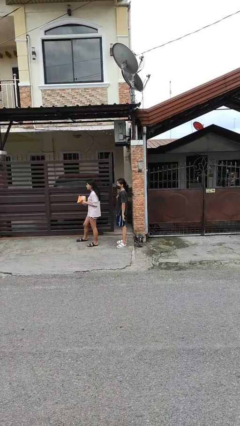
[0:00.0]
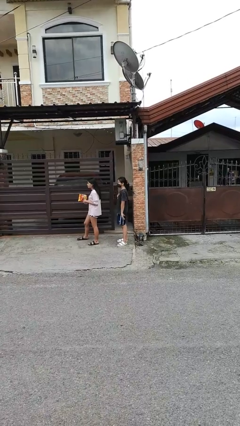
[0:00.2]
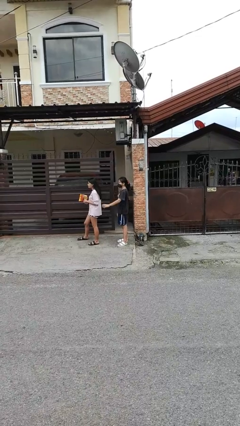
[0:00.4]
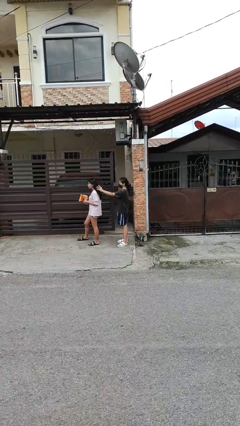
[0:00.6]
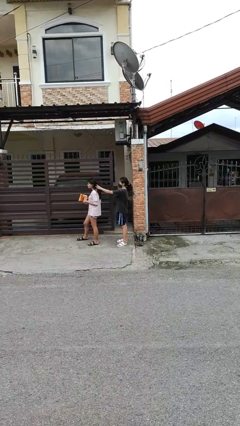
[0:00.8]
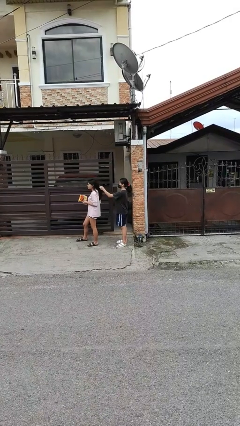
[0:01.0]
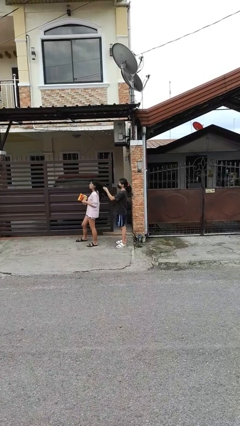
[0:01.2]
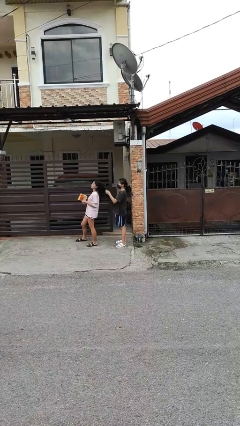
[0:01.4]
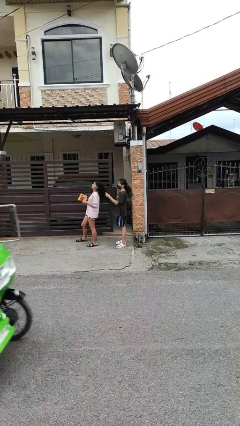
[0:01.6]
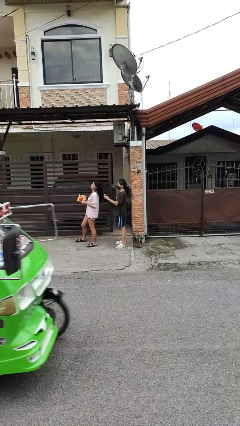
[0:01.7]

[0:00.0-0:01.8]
person grabs person by hair

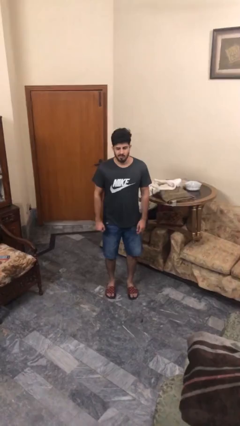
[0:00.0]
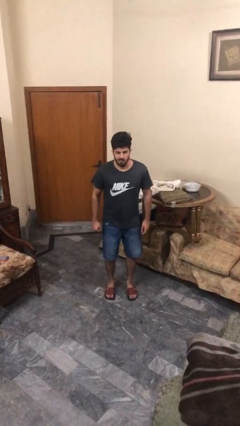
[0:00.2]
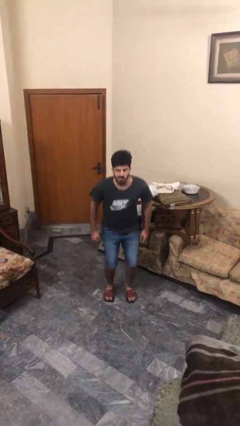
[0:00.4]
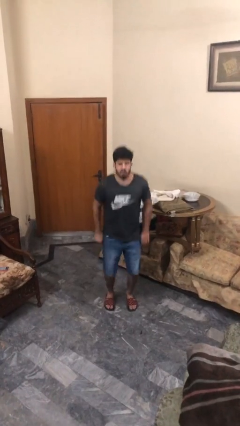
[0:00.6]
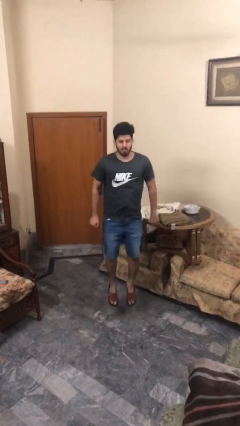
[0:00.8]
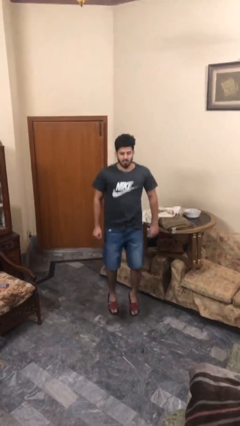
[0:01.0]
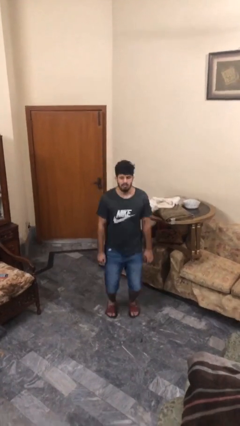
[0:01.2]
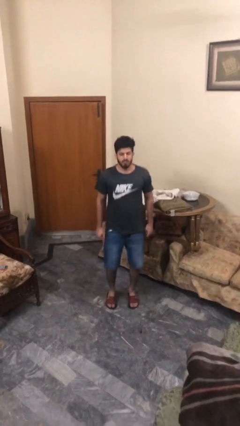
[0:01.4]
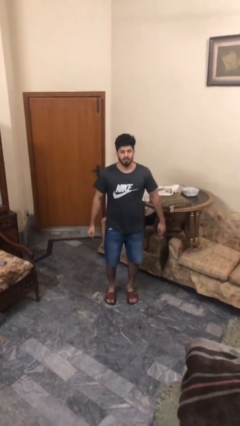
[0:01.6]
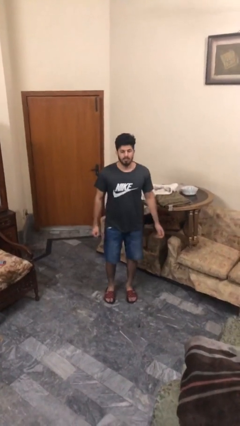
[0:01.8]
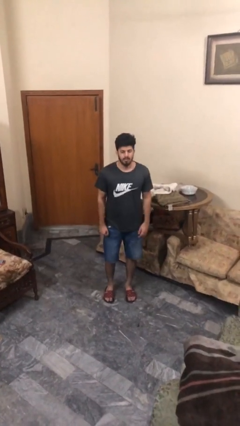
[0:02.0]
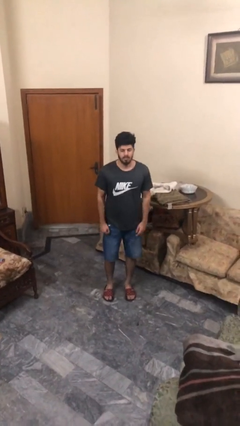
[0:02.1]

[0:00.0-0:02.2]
person jumps

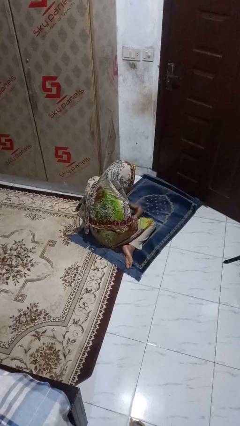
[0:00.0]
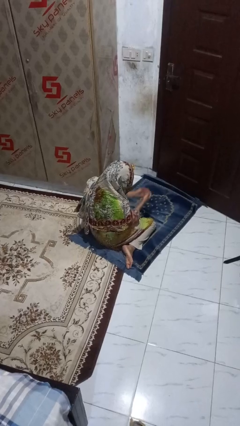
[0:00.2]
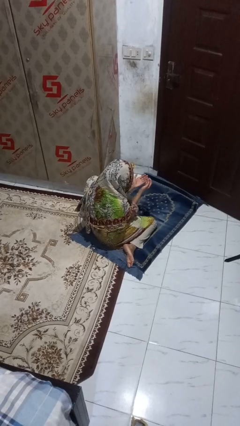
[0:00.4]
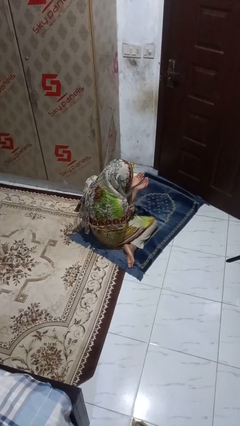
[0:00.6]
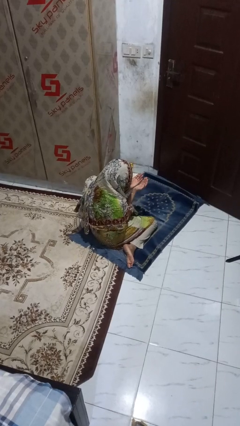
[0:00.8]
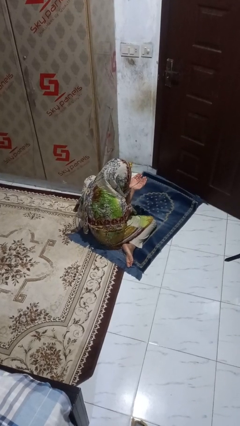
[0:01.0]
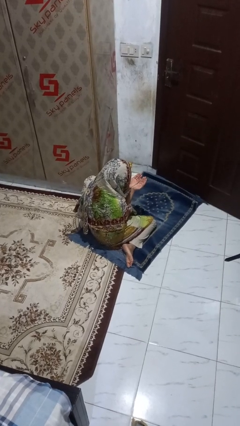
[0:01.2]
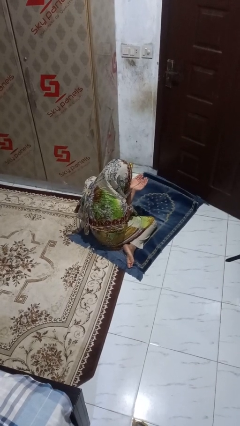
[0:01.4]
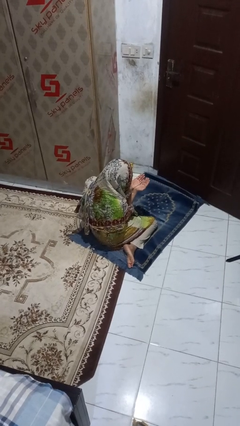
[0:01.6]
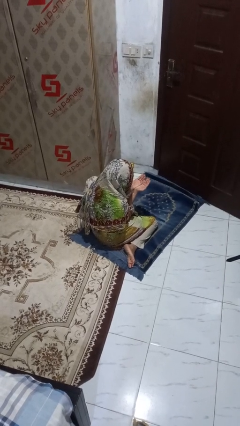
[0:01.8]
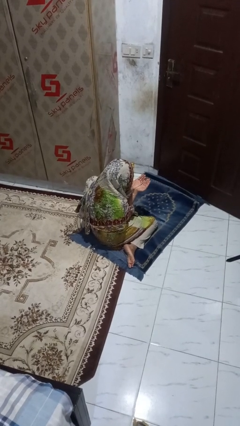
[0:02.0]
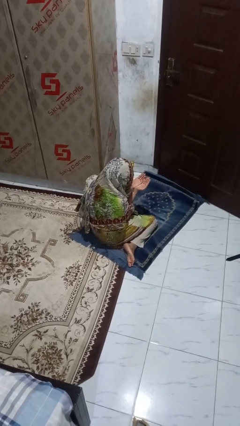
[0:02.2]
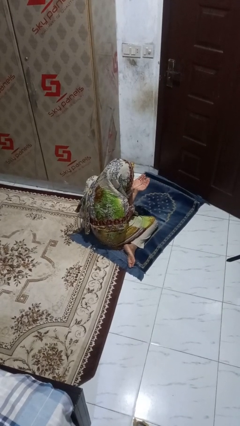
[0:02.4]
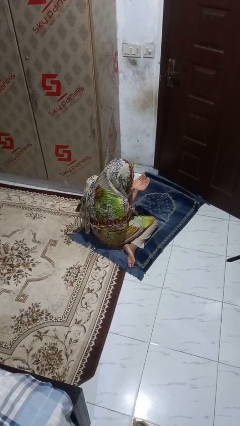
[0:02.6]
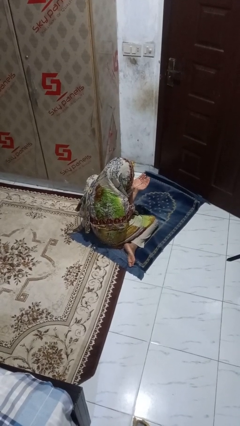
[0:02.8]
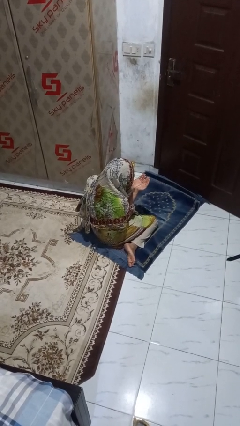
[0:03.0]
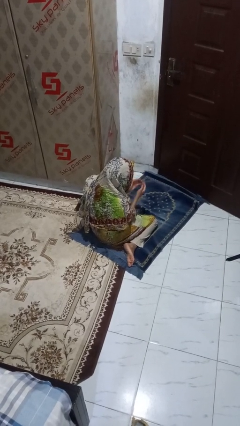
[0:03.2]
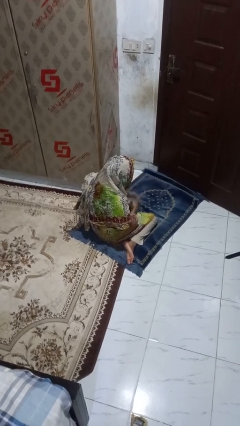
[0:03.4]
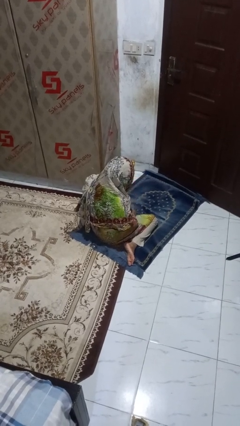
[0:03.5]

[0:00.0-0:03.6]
person prays

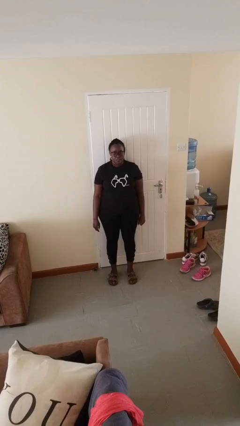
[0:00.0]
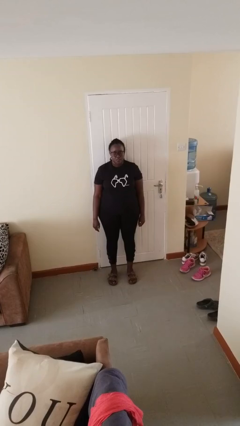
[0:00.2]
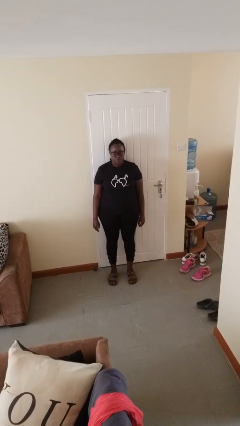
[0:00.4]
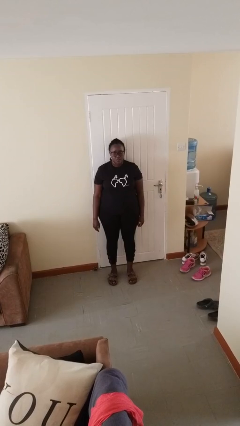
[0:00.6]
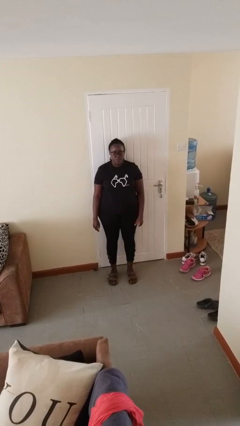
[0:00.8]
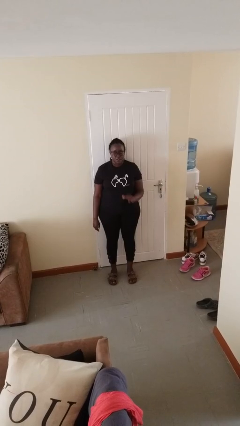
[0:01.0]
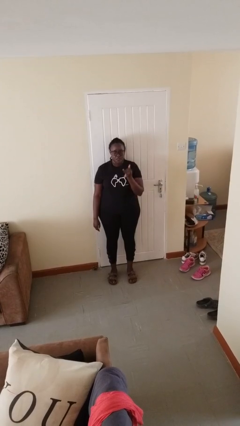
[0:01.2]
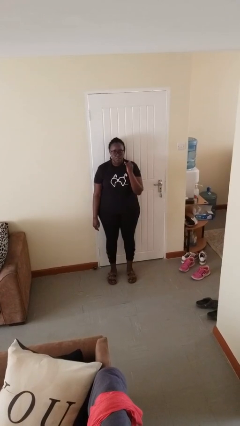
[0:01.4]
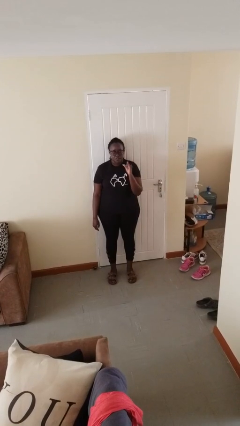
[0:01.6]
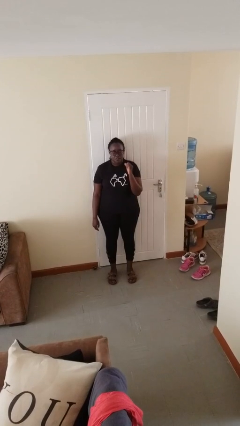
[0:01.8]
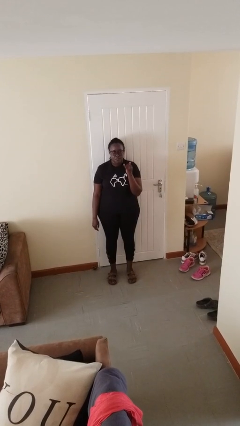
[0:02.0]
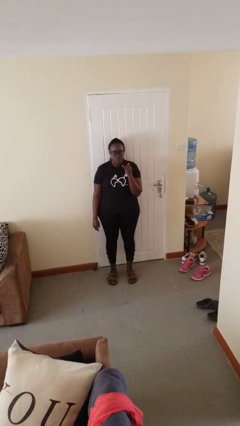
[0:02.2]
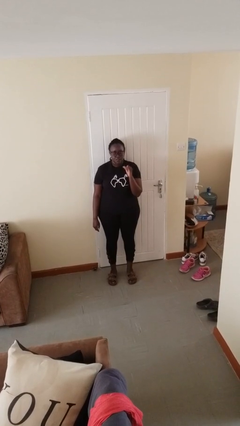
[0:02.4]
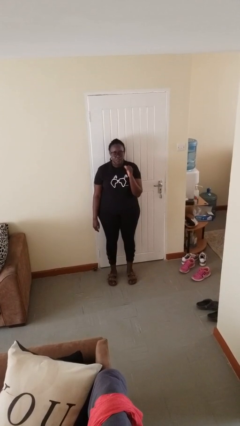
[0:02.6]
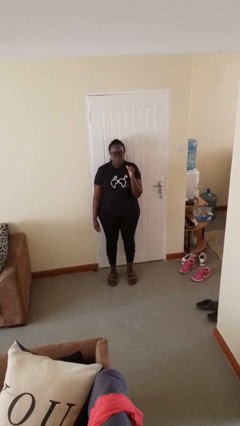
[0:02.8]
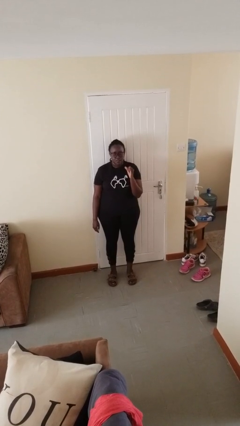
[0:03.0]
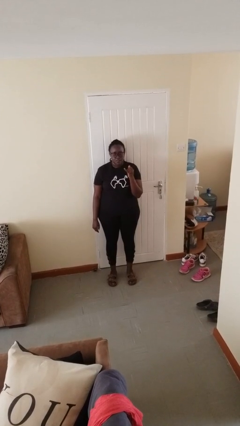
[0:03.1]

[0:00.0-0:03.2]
person gestures hang loose

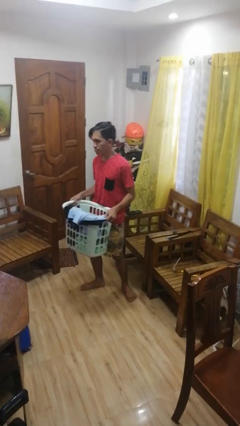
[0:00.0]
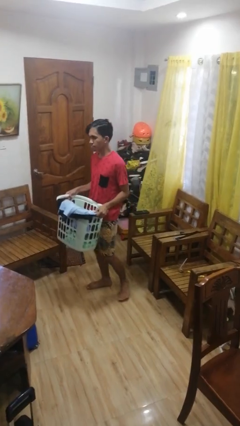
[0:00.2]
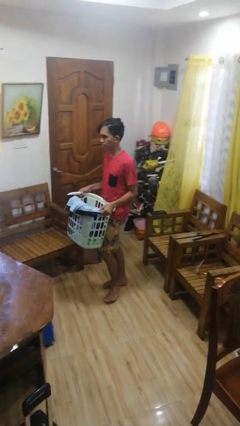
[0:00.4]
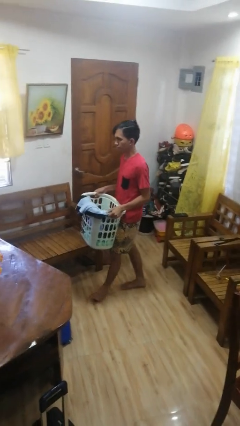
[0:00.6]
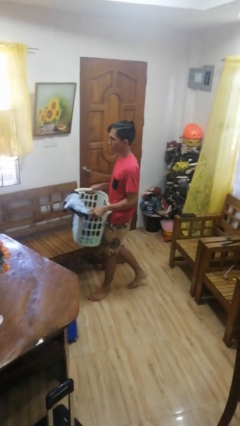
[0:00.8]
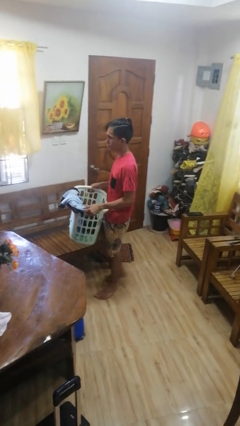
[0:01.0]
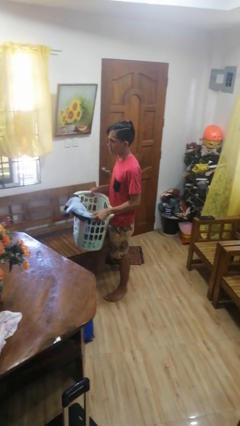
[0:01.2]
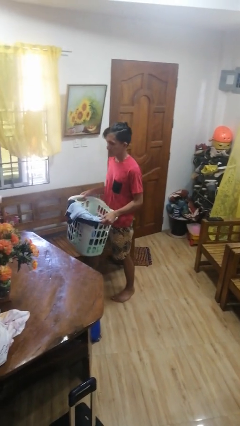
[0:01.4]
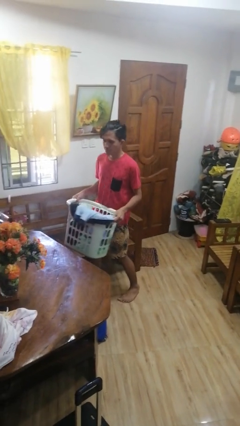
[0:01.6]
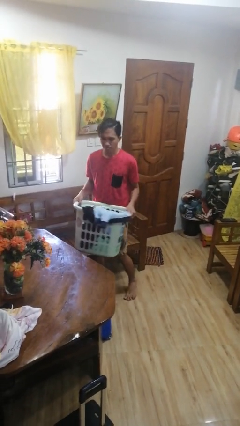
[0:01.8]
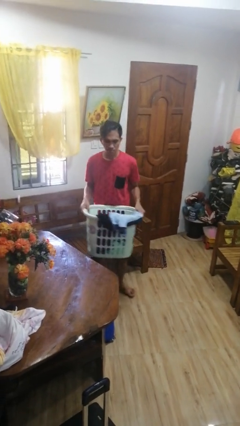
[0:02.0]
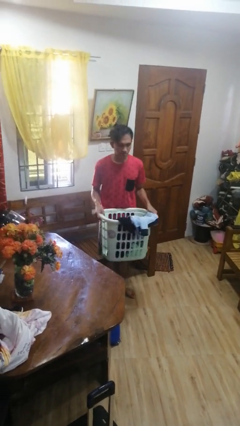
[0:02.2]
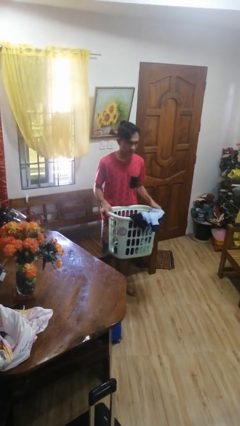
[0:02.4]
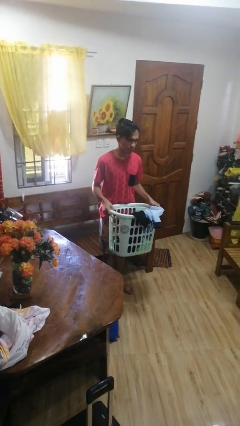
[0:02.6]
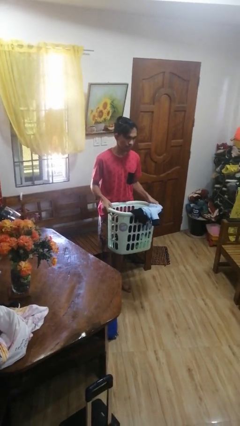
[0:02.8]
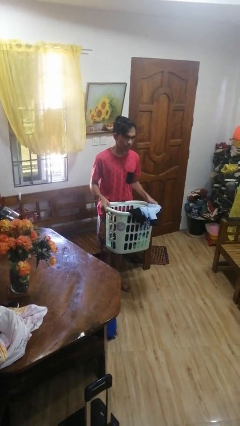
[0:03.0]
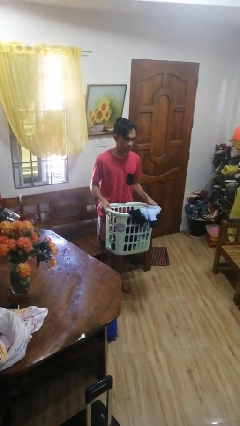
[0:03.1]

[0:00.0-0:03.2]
person carries laundry basket

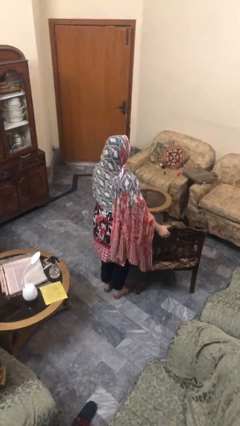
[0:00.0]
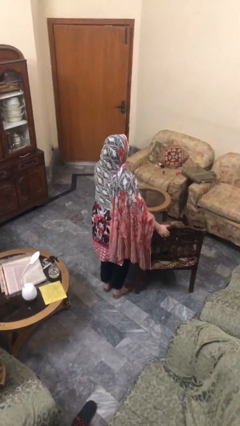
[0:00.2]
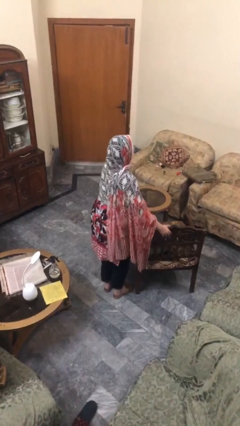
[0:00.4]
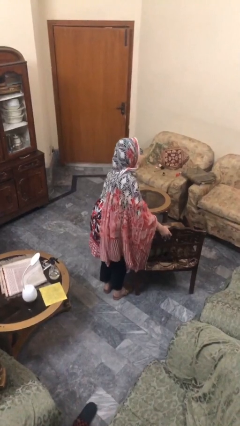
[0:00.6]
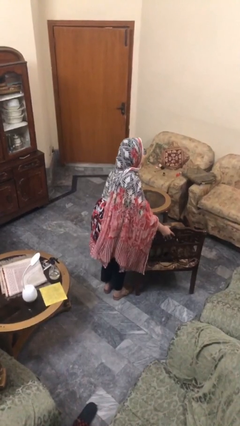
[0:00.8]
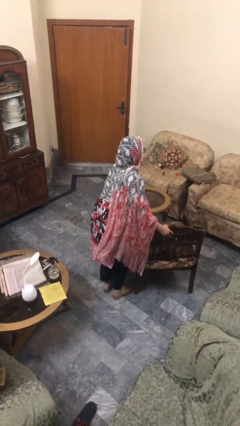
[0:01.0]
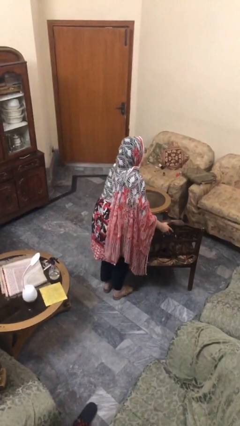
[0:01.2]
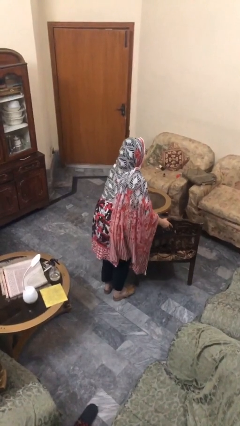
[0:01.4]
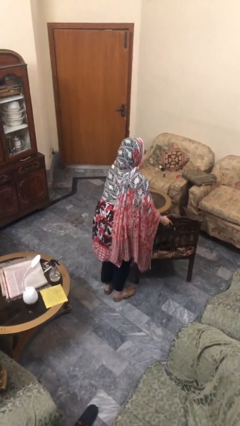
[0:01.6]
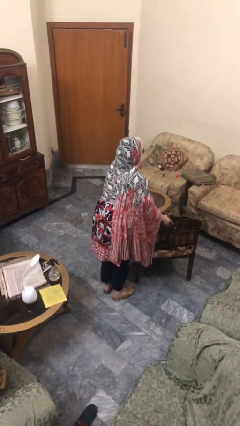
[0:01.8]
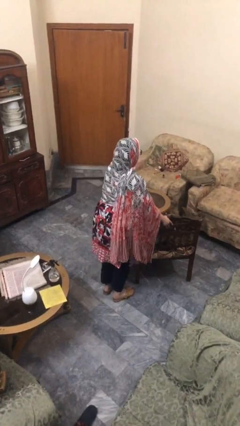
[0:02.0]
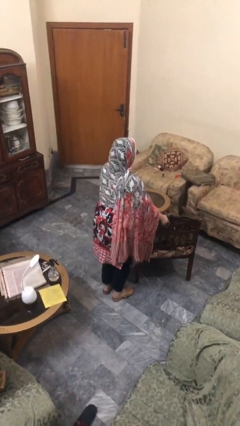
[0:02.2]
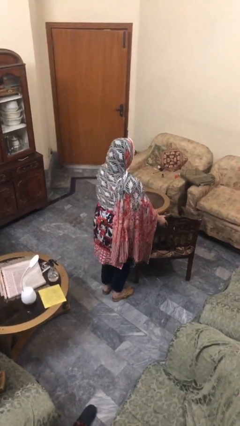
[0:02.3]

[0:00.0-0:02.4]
person pushes in chair

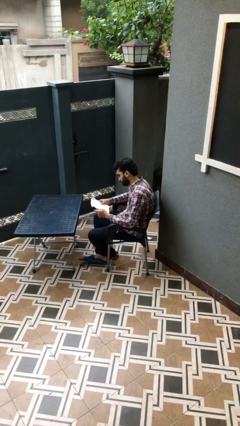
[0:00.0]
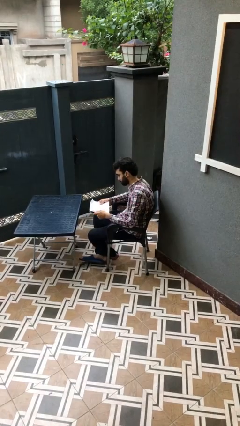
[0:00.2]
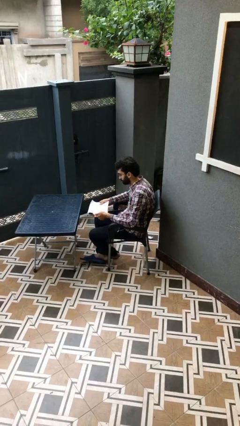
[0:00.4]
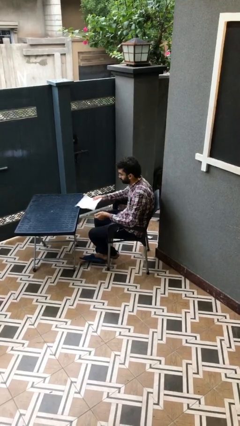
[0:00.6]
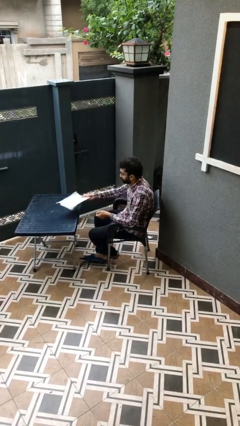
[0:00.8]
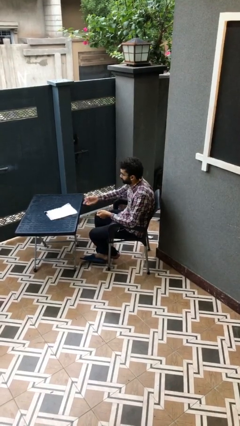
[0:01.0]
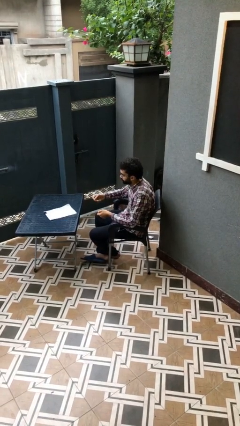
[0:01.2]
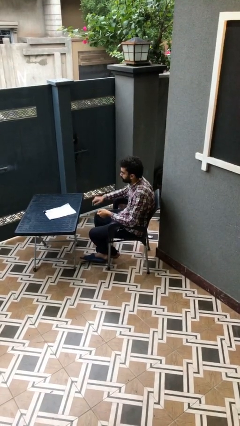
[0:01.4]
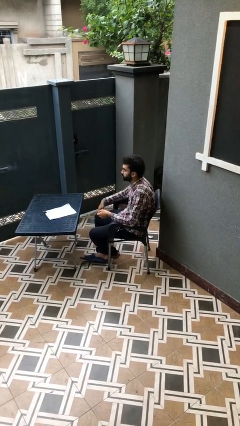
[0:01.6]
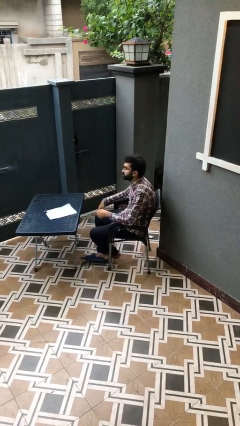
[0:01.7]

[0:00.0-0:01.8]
person puts down object on table
